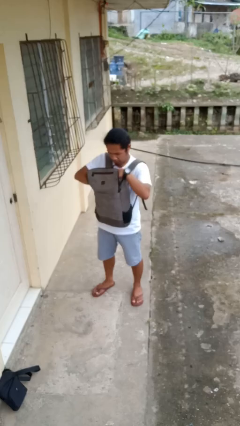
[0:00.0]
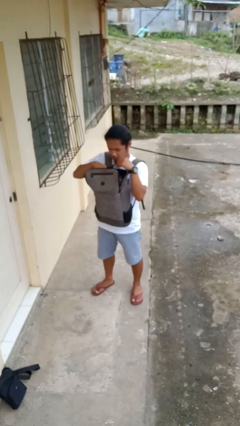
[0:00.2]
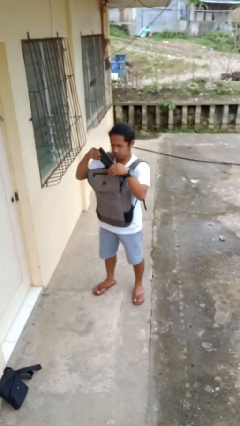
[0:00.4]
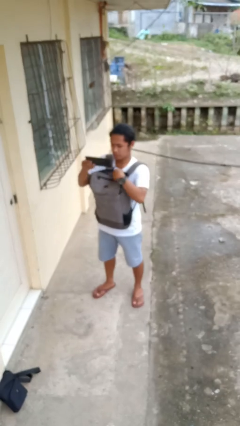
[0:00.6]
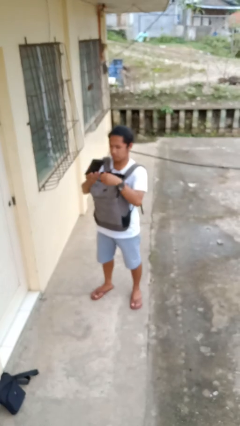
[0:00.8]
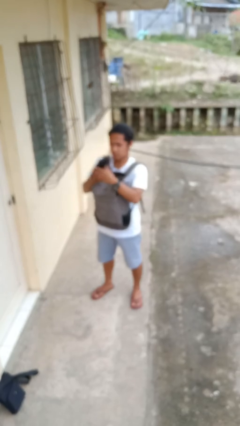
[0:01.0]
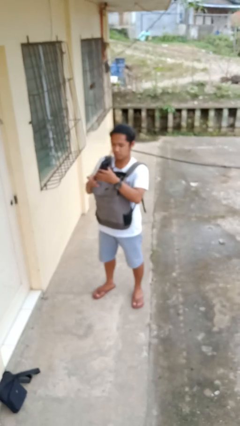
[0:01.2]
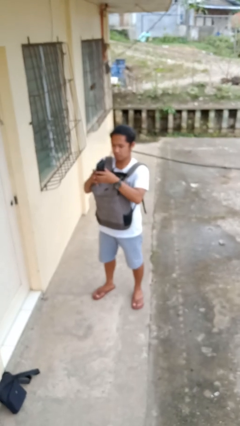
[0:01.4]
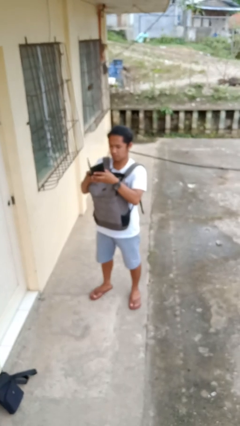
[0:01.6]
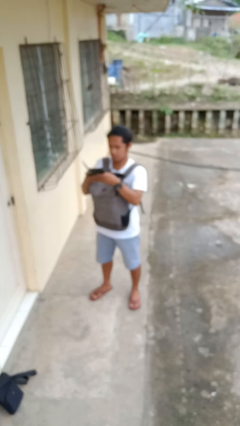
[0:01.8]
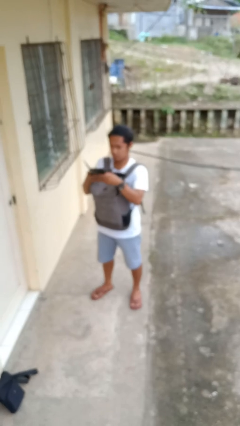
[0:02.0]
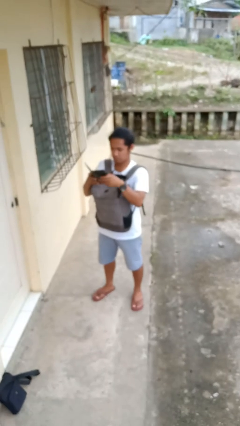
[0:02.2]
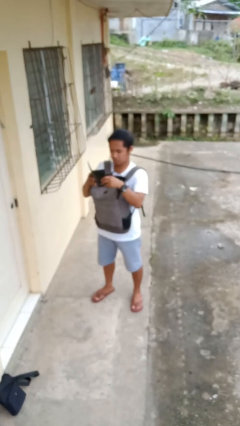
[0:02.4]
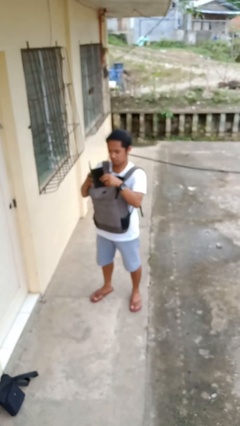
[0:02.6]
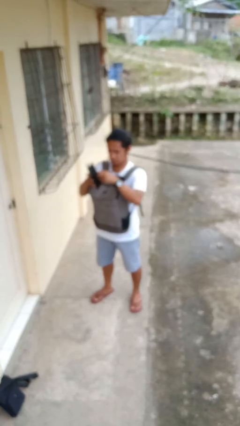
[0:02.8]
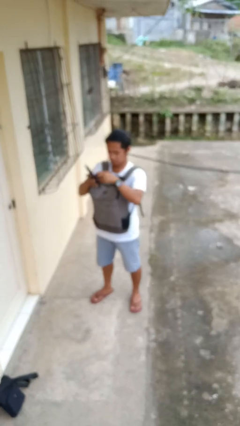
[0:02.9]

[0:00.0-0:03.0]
person takes object from backpack

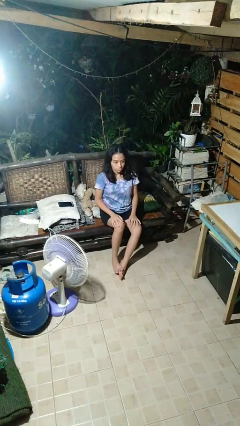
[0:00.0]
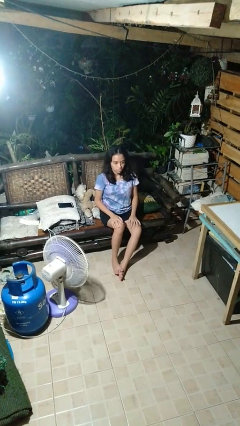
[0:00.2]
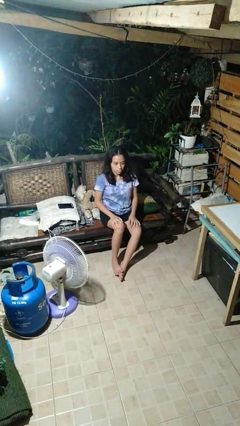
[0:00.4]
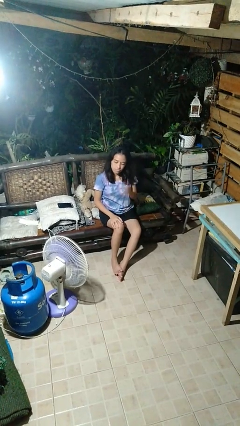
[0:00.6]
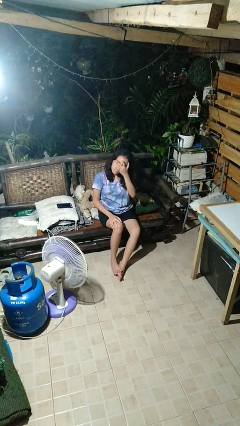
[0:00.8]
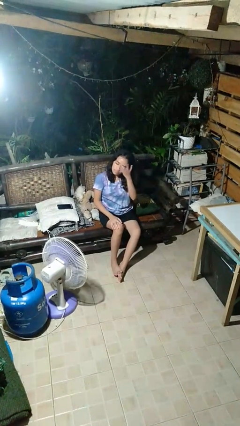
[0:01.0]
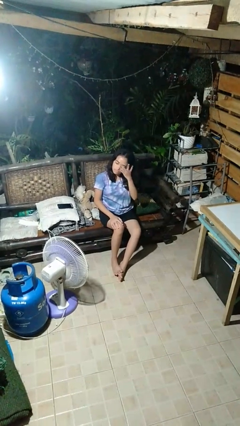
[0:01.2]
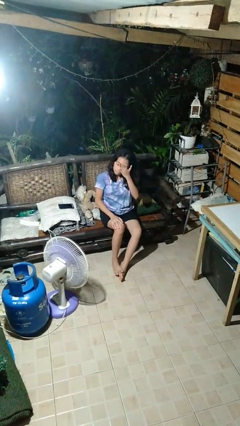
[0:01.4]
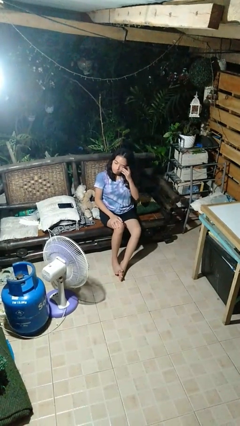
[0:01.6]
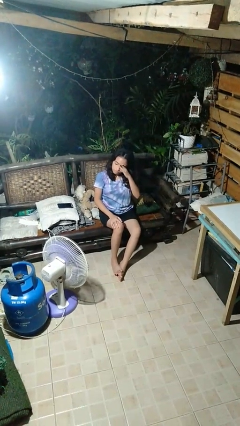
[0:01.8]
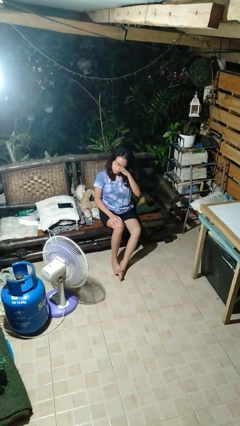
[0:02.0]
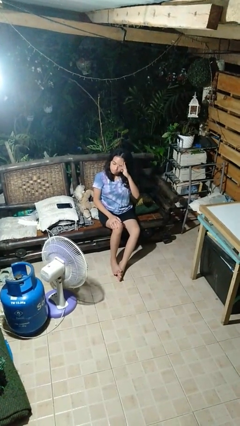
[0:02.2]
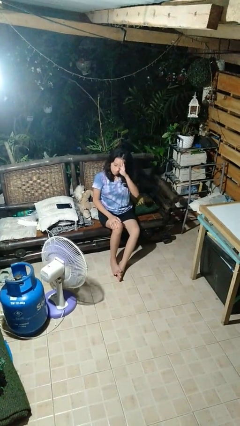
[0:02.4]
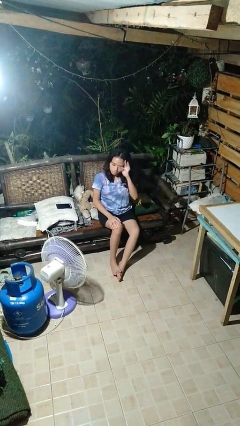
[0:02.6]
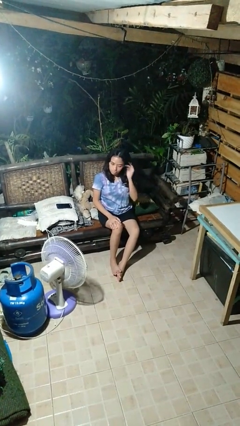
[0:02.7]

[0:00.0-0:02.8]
person rubs eyes

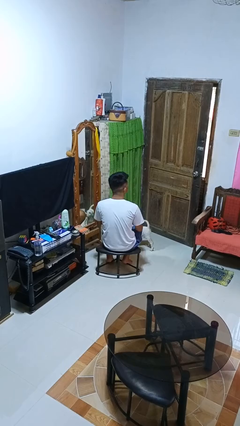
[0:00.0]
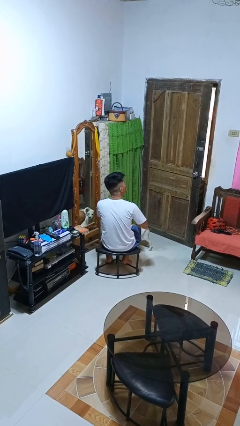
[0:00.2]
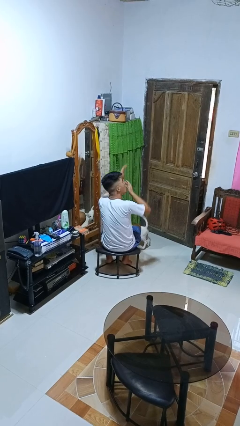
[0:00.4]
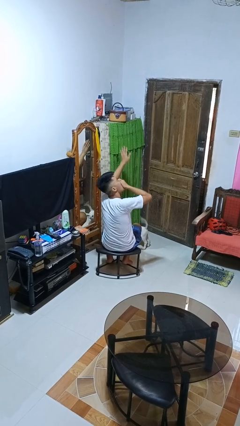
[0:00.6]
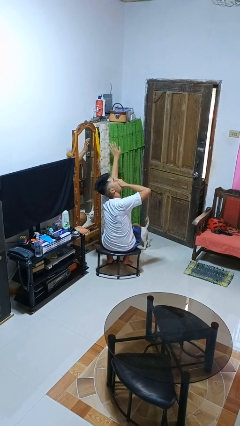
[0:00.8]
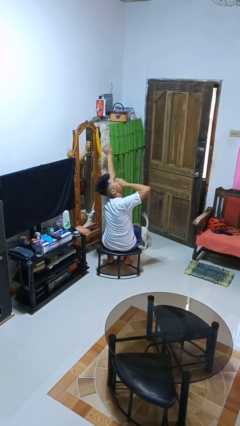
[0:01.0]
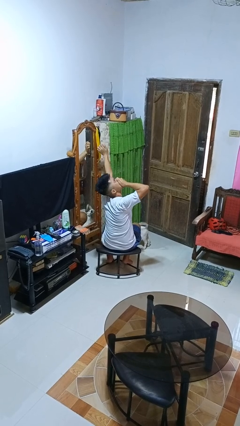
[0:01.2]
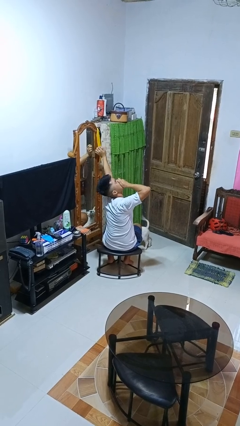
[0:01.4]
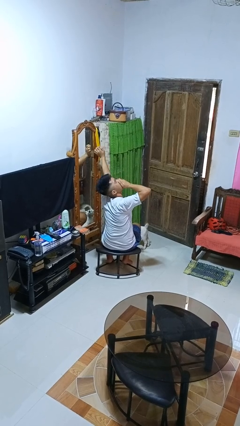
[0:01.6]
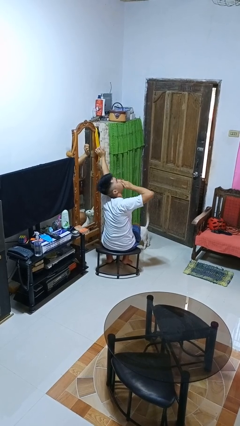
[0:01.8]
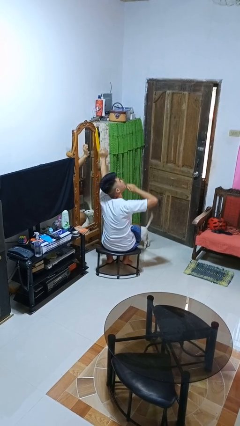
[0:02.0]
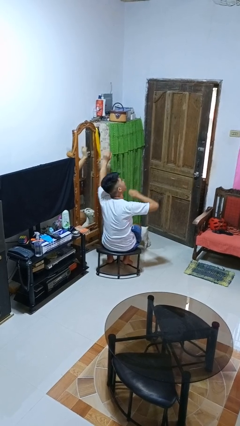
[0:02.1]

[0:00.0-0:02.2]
person yawns

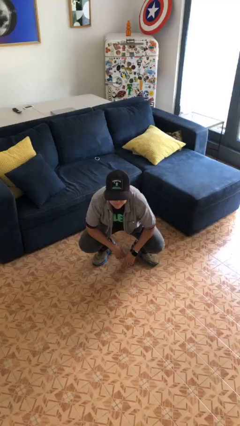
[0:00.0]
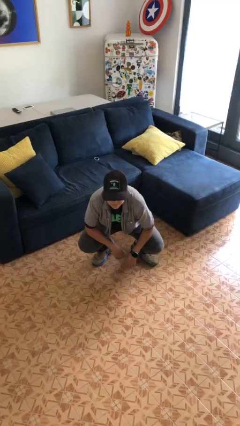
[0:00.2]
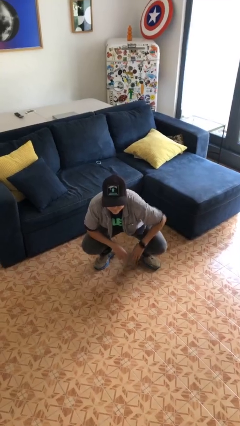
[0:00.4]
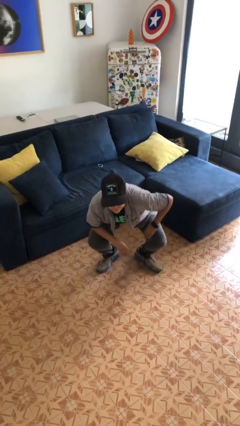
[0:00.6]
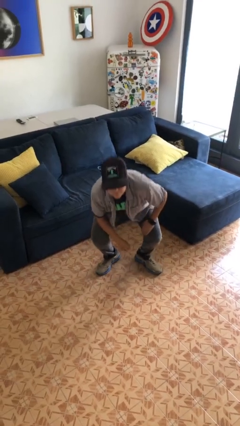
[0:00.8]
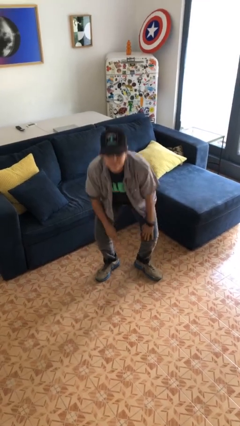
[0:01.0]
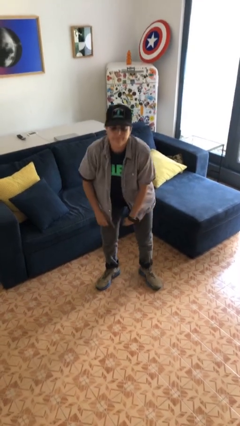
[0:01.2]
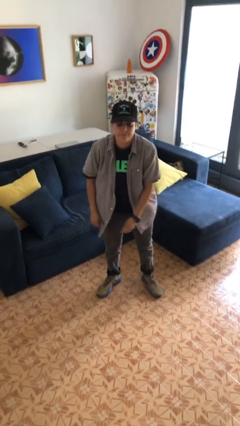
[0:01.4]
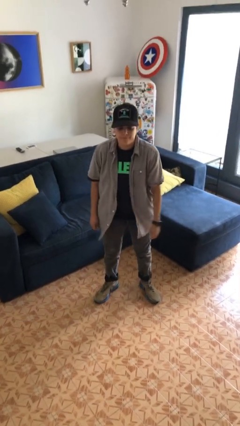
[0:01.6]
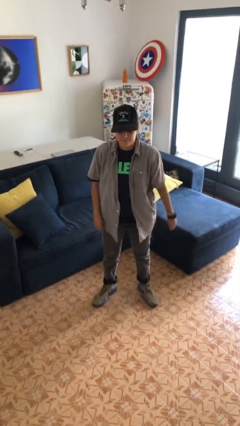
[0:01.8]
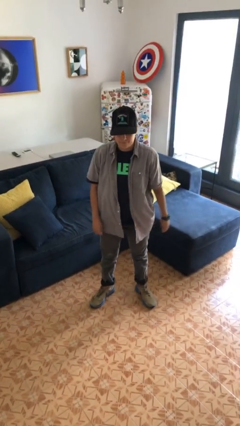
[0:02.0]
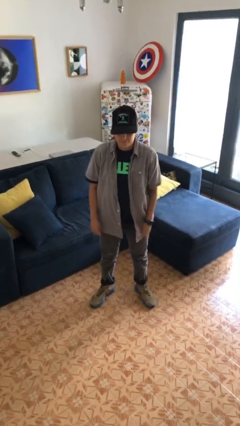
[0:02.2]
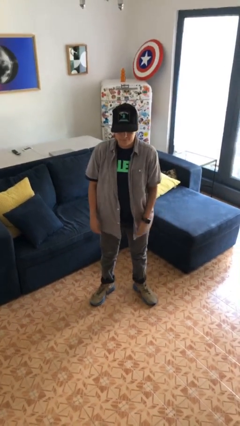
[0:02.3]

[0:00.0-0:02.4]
person stands up

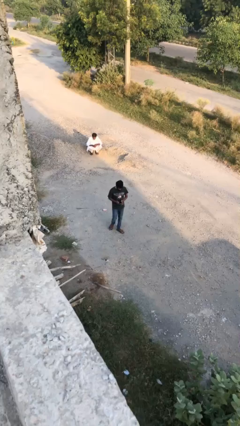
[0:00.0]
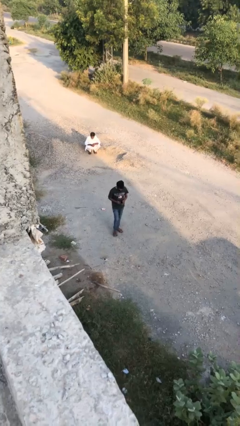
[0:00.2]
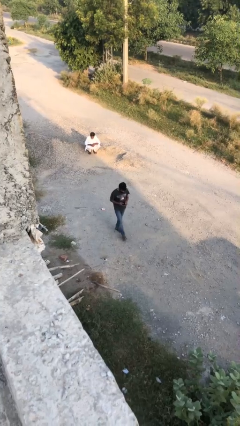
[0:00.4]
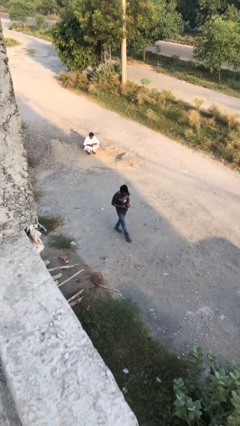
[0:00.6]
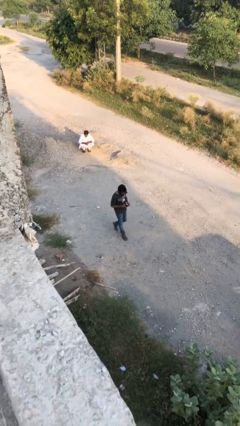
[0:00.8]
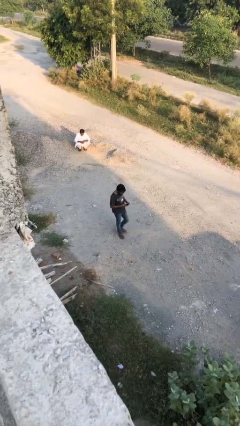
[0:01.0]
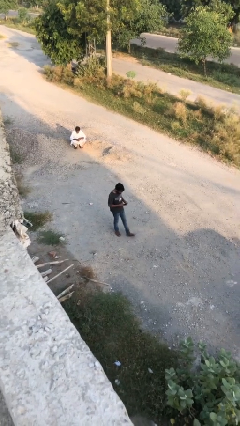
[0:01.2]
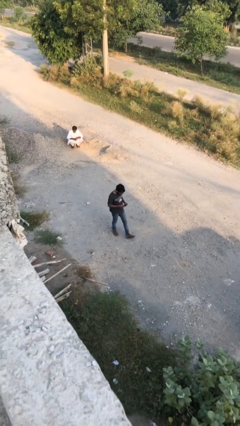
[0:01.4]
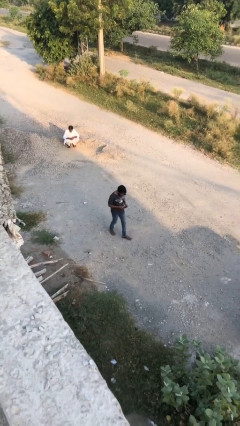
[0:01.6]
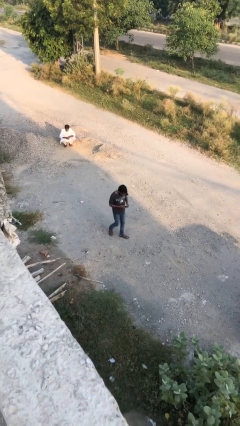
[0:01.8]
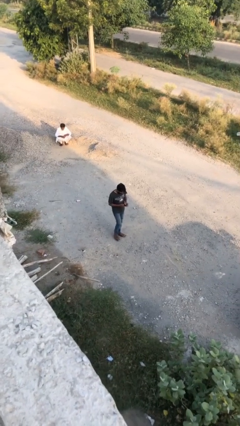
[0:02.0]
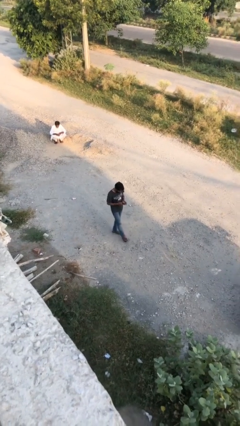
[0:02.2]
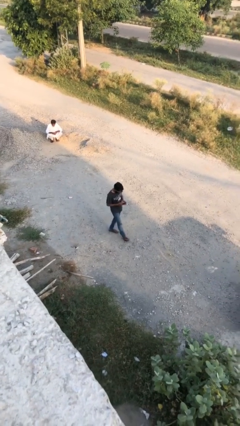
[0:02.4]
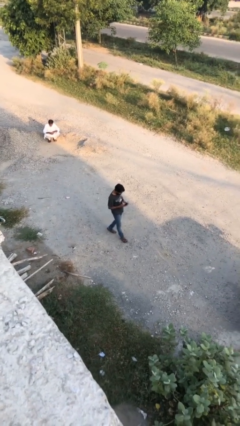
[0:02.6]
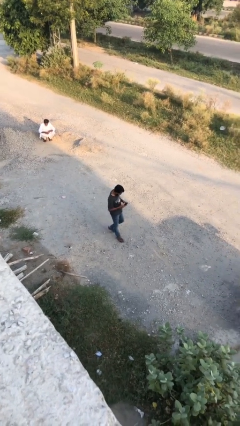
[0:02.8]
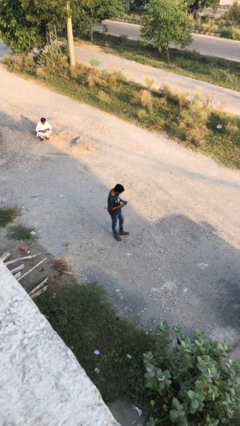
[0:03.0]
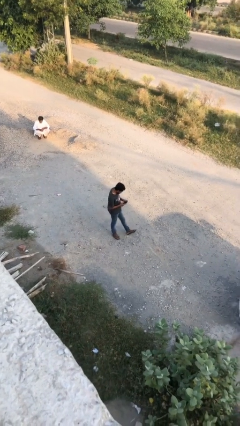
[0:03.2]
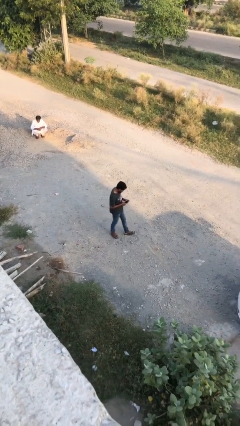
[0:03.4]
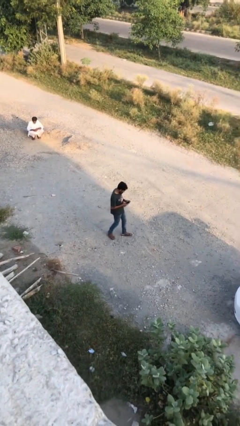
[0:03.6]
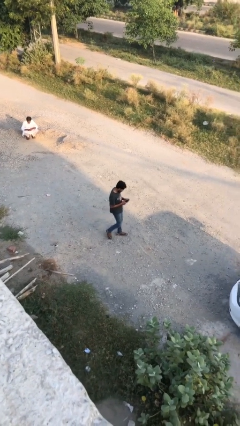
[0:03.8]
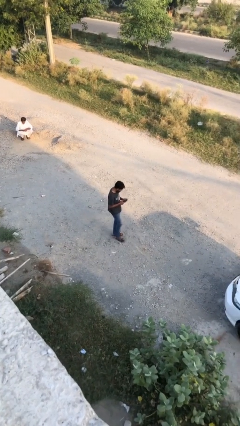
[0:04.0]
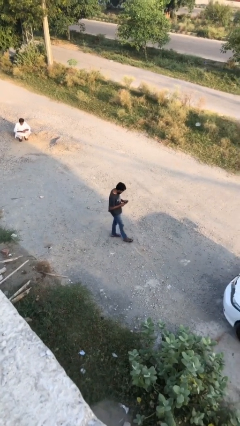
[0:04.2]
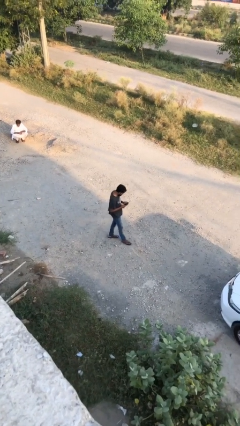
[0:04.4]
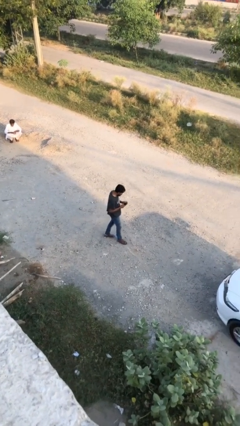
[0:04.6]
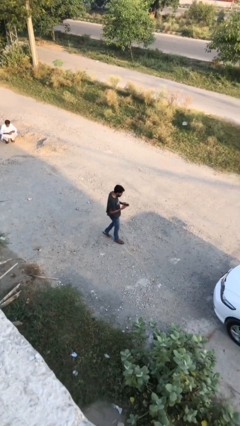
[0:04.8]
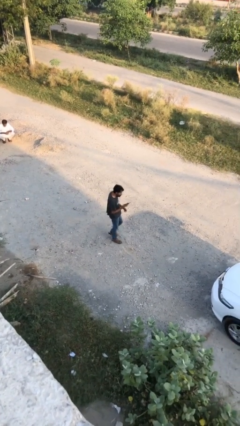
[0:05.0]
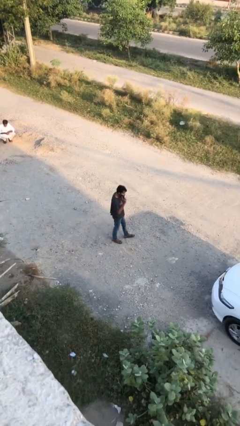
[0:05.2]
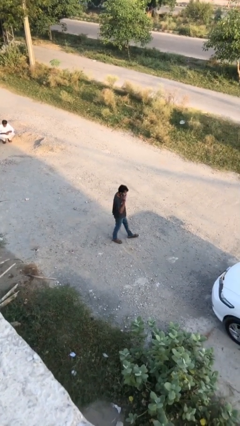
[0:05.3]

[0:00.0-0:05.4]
person texts on phone

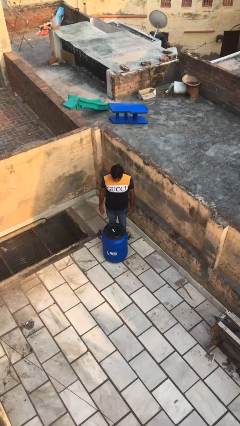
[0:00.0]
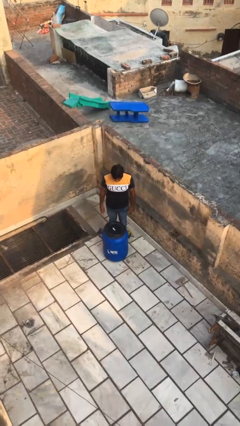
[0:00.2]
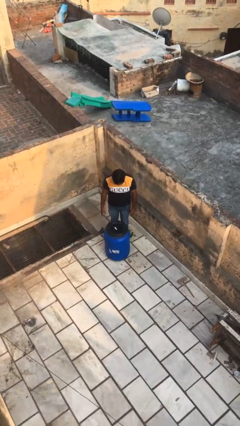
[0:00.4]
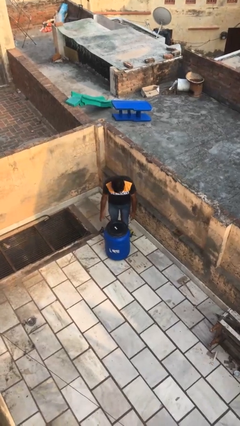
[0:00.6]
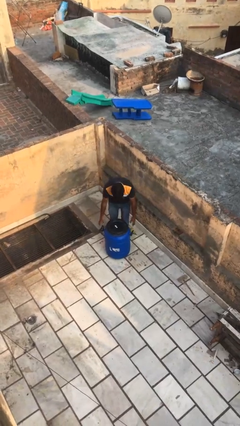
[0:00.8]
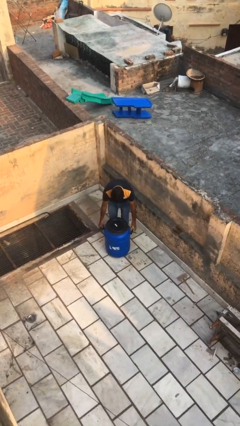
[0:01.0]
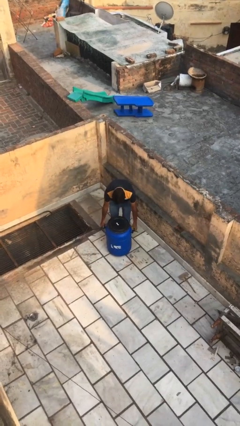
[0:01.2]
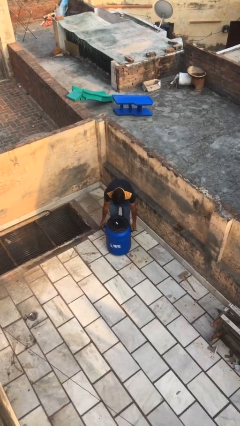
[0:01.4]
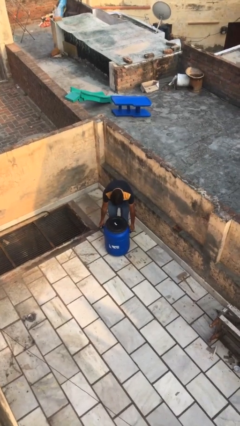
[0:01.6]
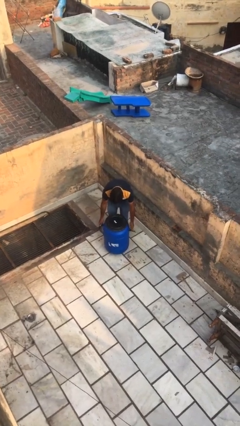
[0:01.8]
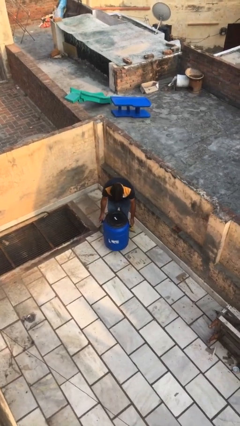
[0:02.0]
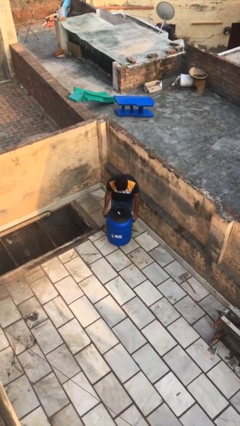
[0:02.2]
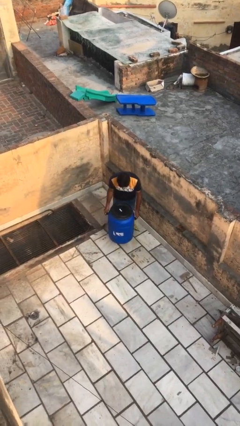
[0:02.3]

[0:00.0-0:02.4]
person picks up object from floor
